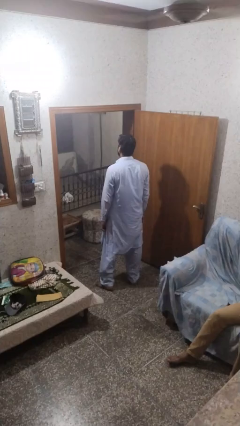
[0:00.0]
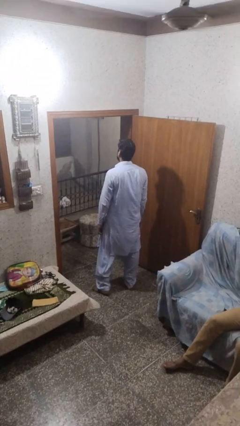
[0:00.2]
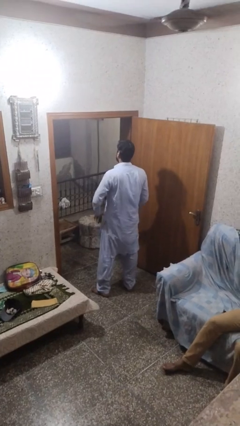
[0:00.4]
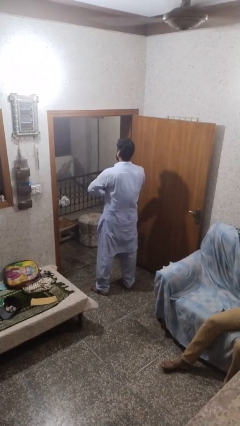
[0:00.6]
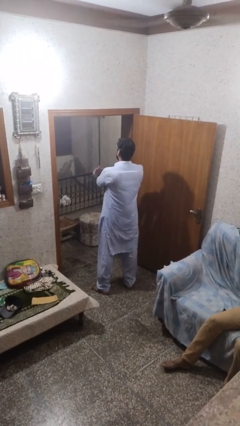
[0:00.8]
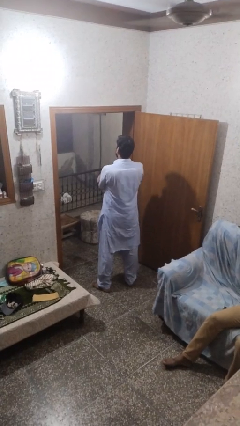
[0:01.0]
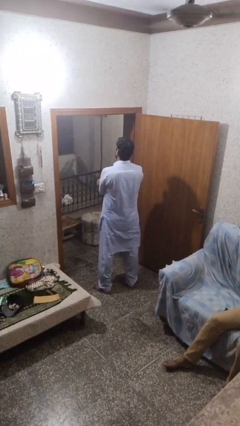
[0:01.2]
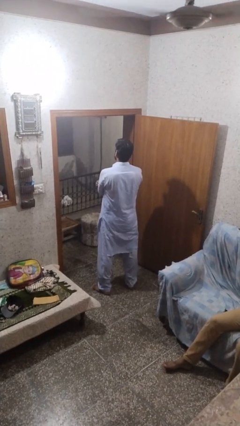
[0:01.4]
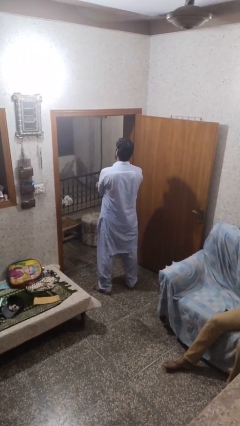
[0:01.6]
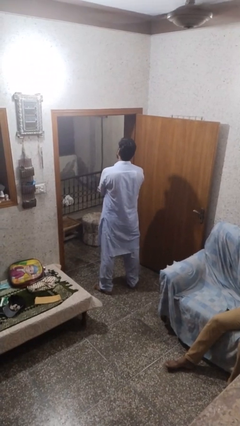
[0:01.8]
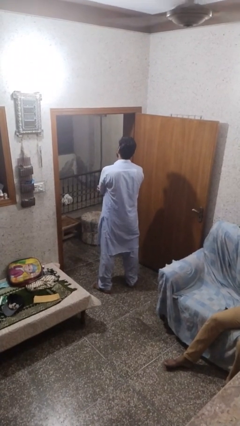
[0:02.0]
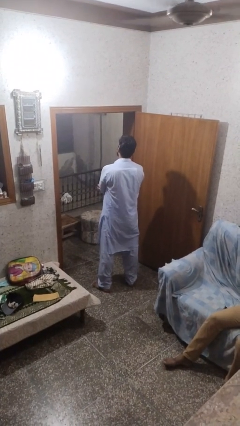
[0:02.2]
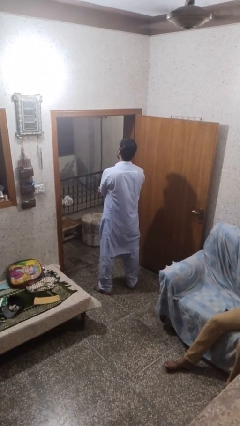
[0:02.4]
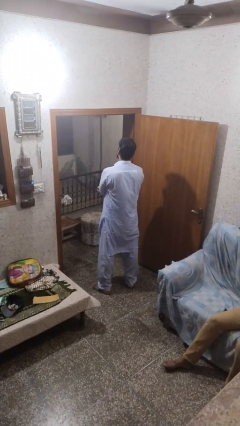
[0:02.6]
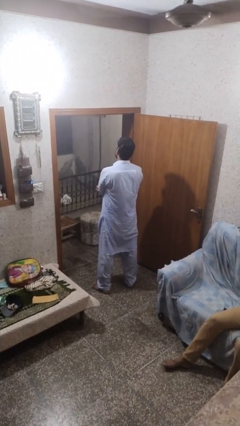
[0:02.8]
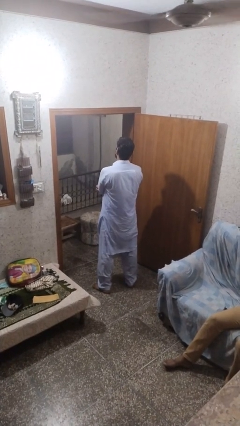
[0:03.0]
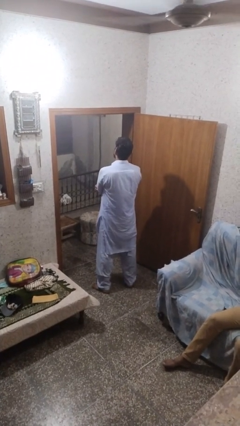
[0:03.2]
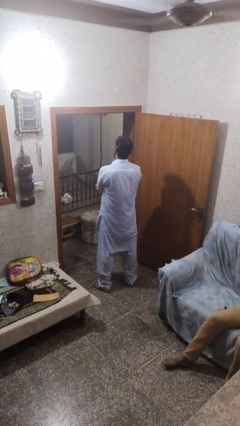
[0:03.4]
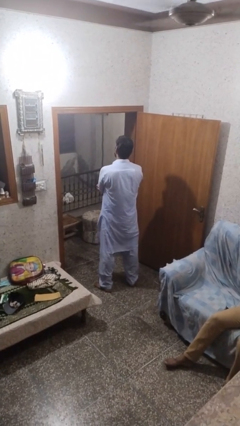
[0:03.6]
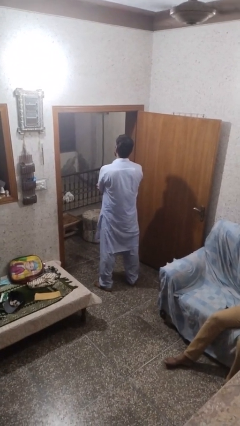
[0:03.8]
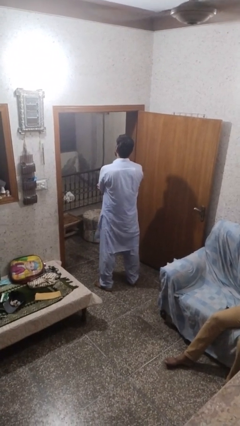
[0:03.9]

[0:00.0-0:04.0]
person crosses arms

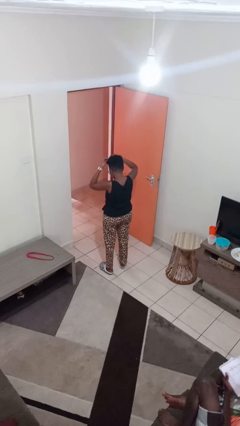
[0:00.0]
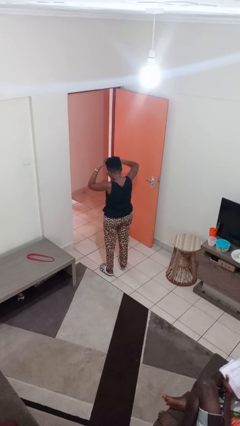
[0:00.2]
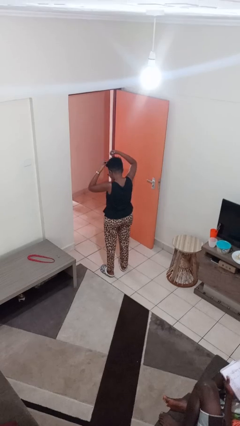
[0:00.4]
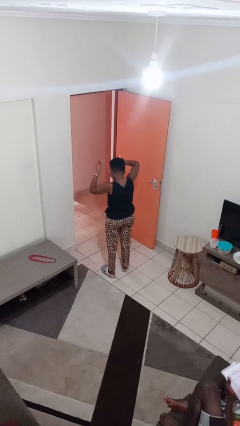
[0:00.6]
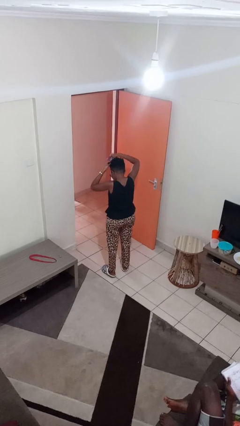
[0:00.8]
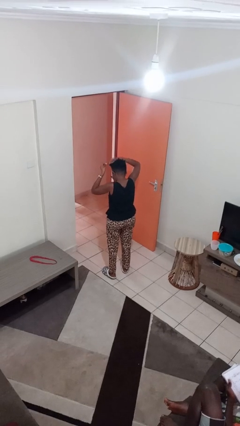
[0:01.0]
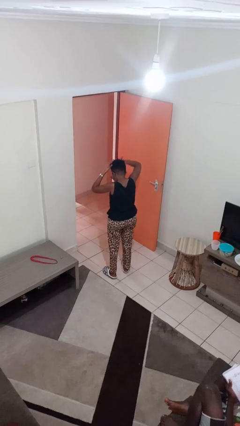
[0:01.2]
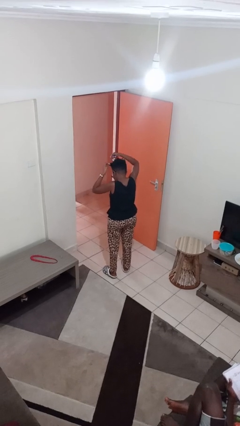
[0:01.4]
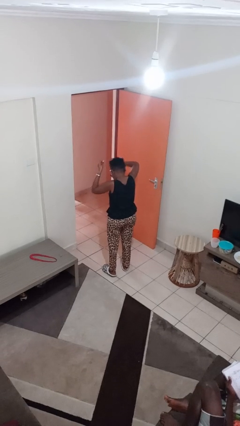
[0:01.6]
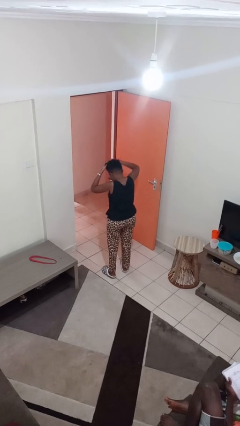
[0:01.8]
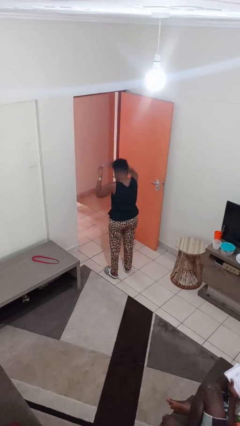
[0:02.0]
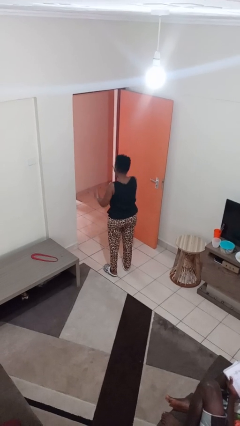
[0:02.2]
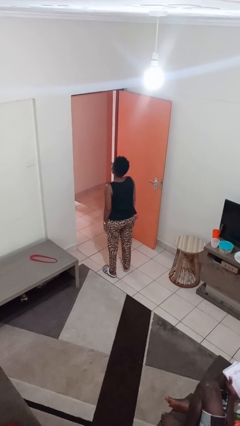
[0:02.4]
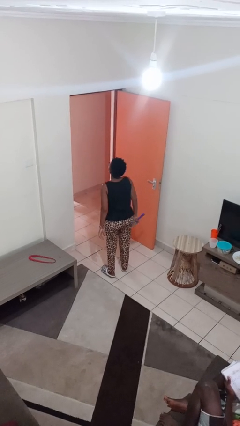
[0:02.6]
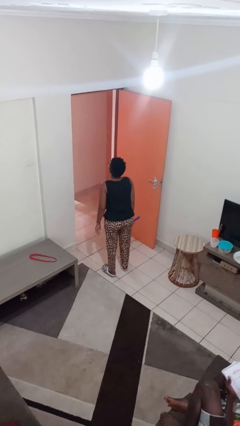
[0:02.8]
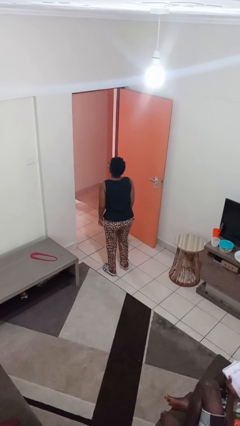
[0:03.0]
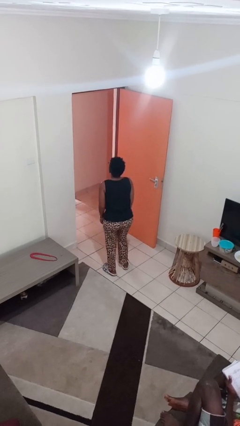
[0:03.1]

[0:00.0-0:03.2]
person brushes hair

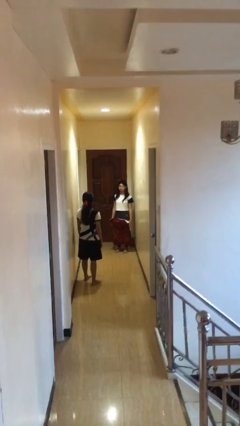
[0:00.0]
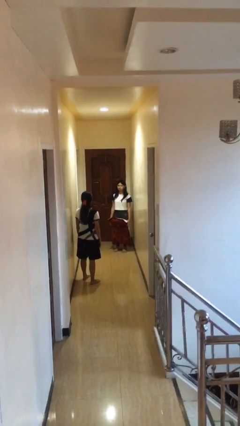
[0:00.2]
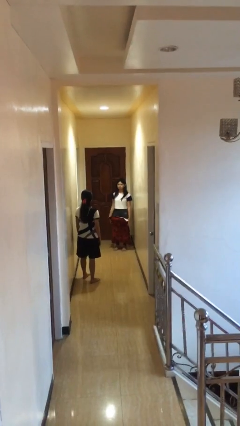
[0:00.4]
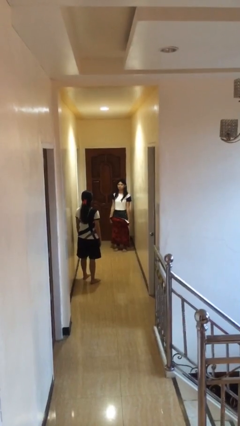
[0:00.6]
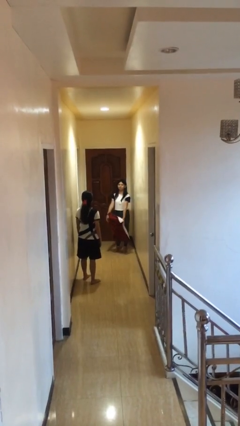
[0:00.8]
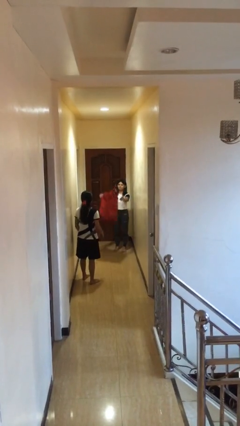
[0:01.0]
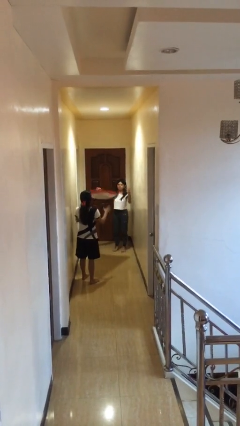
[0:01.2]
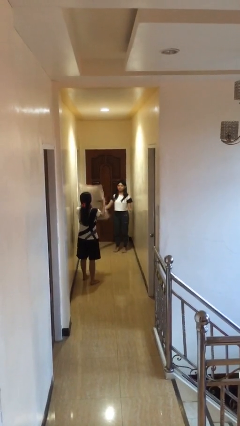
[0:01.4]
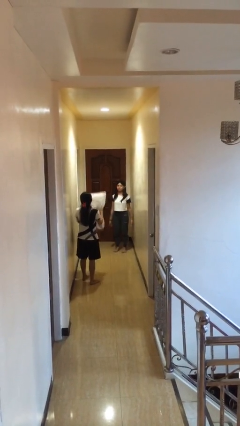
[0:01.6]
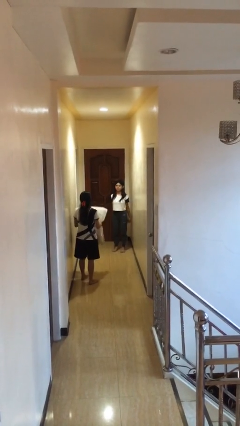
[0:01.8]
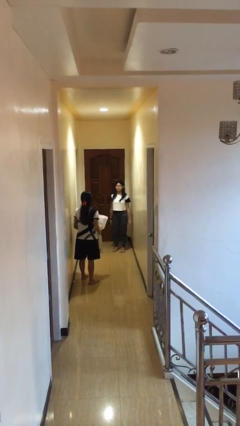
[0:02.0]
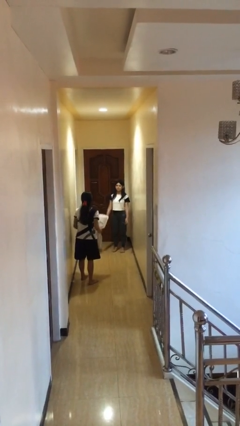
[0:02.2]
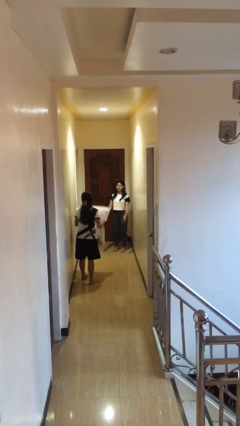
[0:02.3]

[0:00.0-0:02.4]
person throws object to person

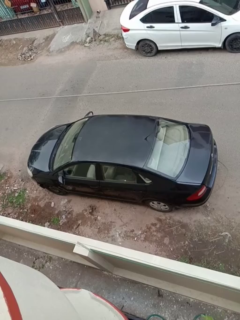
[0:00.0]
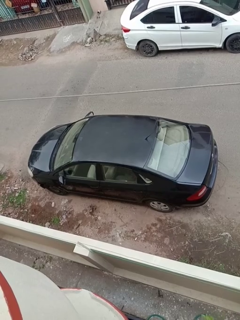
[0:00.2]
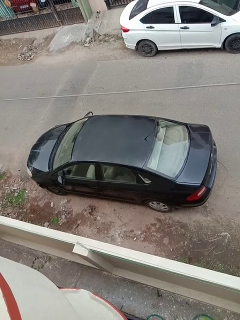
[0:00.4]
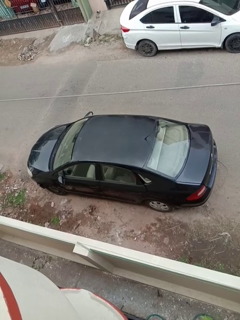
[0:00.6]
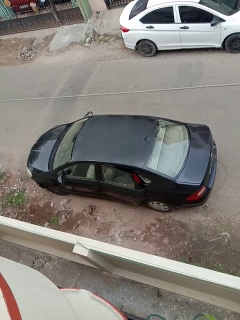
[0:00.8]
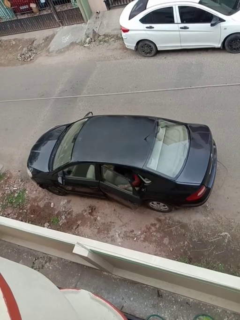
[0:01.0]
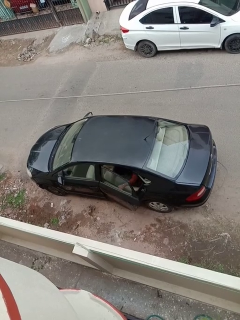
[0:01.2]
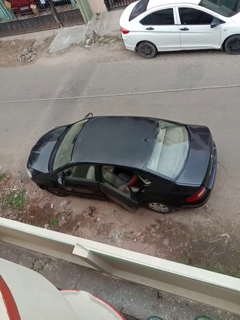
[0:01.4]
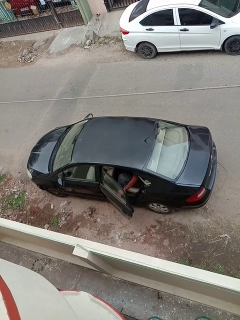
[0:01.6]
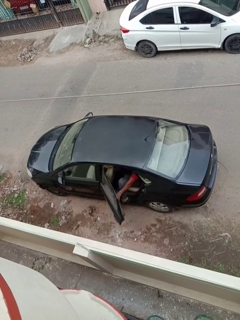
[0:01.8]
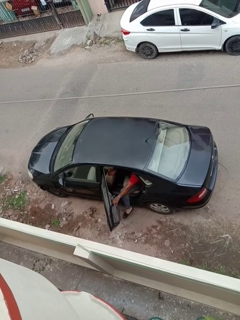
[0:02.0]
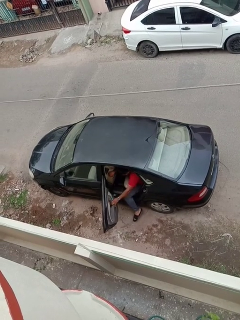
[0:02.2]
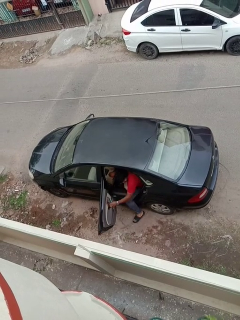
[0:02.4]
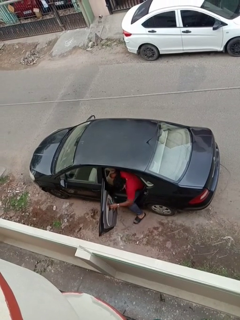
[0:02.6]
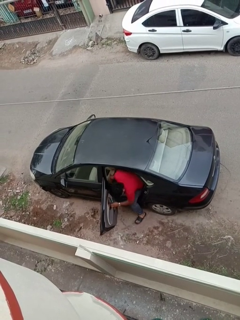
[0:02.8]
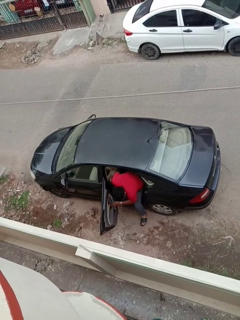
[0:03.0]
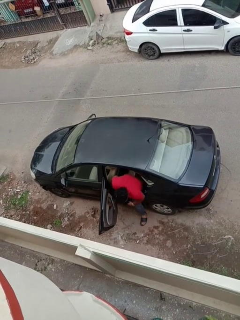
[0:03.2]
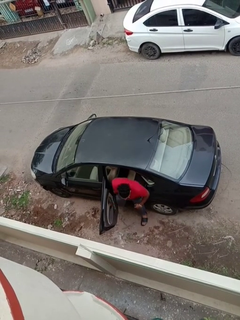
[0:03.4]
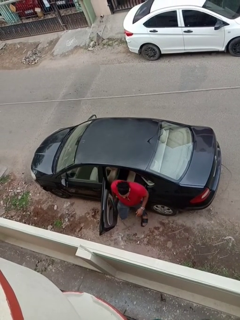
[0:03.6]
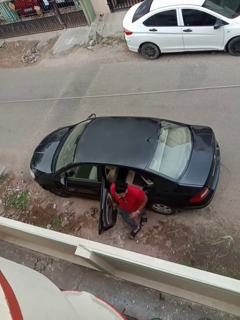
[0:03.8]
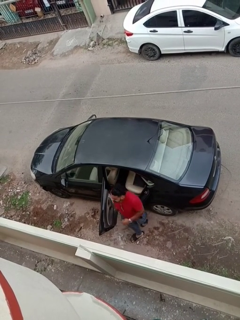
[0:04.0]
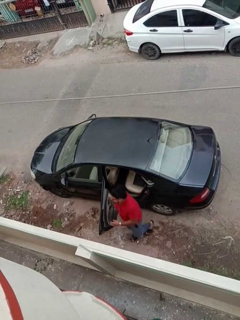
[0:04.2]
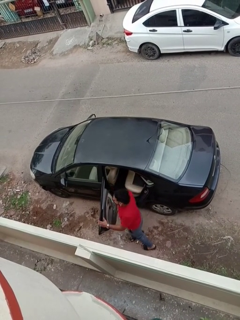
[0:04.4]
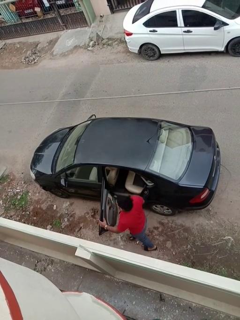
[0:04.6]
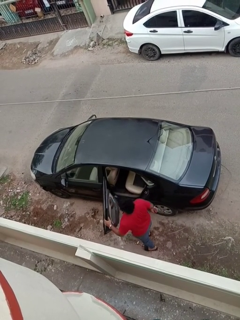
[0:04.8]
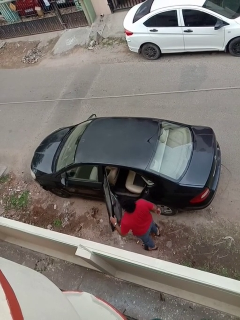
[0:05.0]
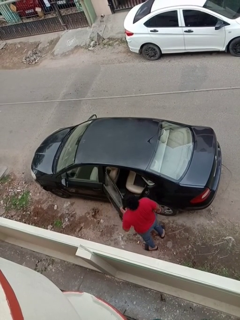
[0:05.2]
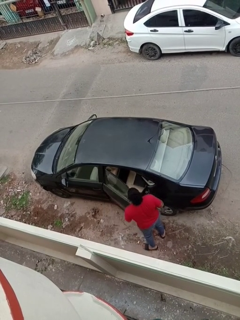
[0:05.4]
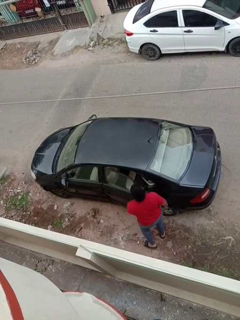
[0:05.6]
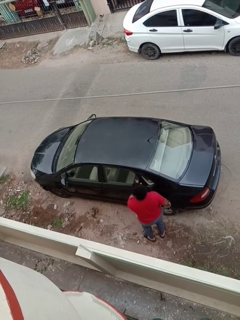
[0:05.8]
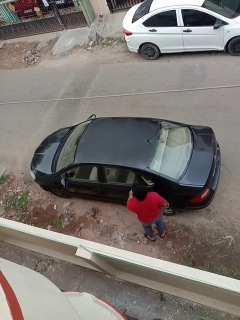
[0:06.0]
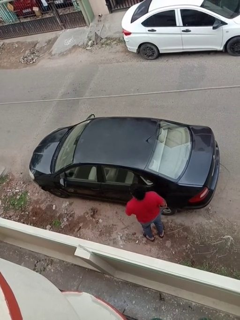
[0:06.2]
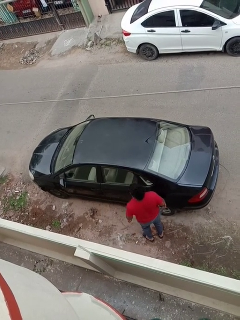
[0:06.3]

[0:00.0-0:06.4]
car drops off person

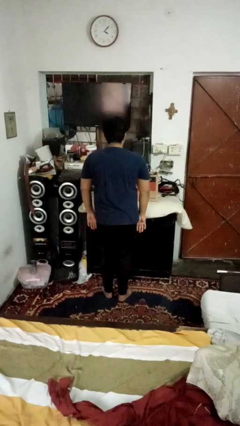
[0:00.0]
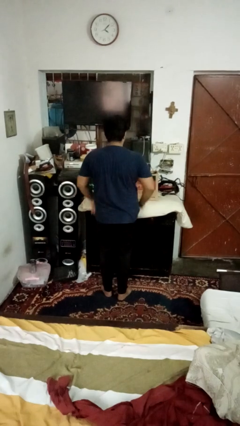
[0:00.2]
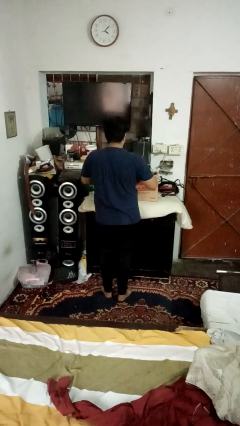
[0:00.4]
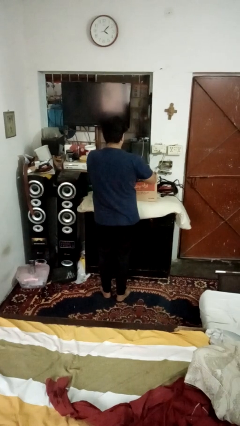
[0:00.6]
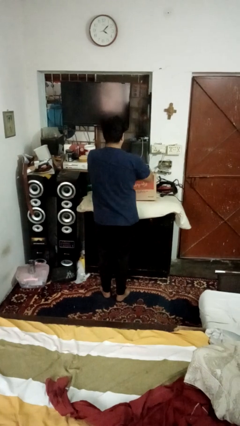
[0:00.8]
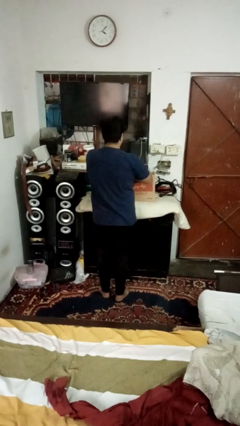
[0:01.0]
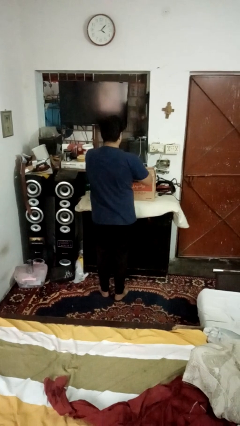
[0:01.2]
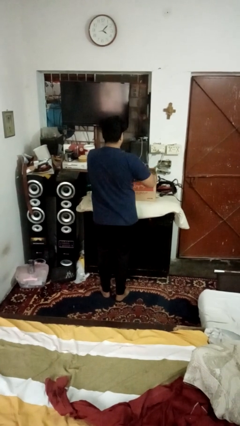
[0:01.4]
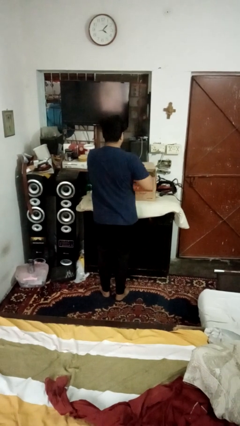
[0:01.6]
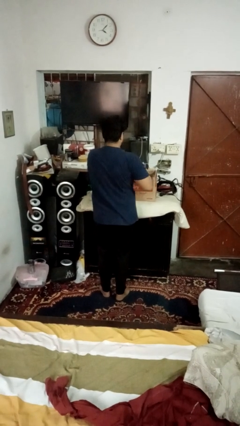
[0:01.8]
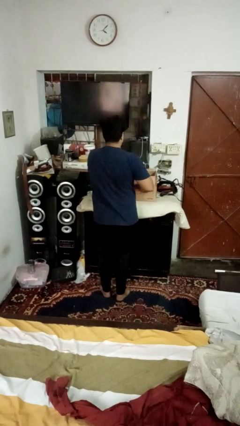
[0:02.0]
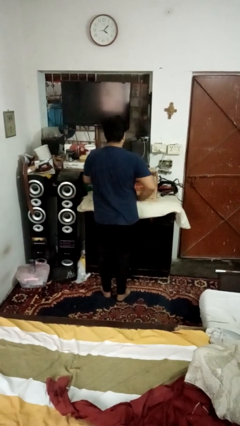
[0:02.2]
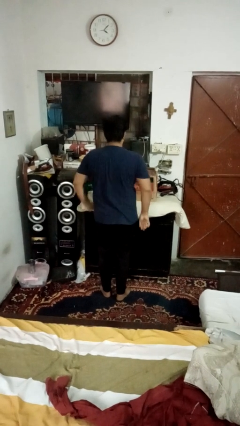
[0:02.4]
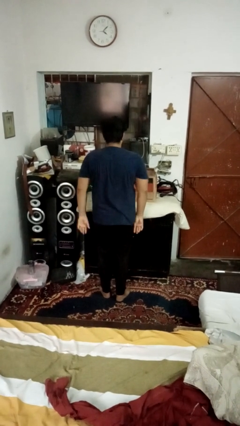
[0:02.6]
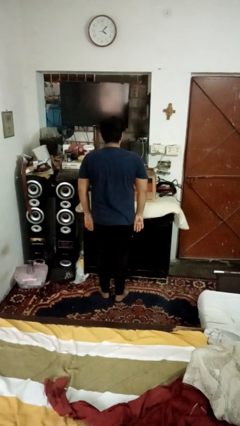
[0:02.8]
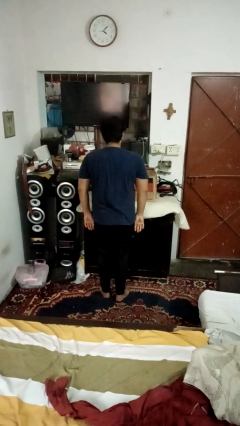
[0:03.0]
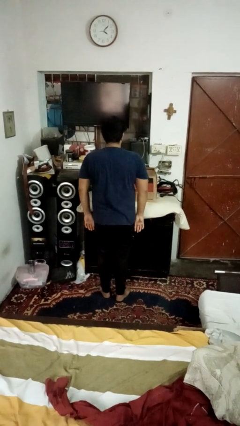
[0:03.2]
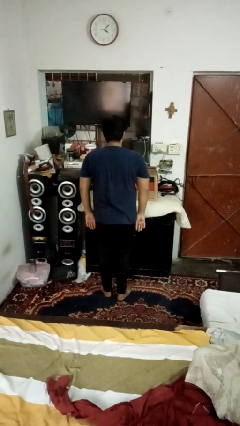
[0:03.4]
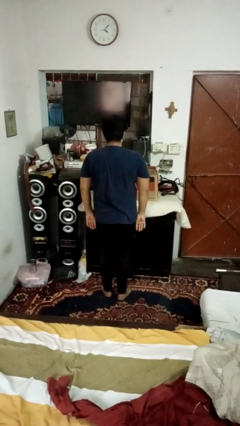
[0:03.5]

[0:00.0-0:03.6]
person opens box
